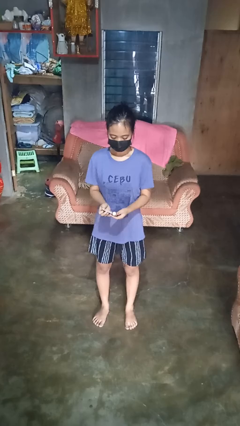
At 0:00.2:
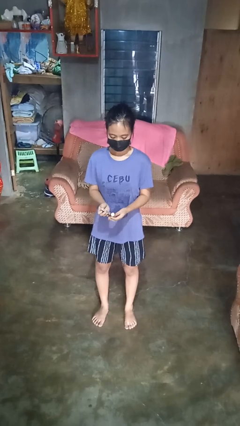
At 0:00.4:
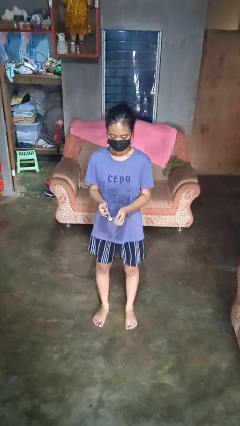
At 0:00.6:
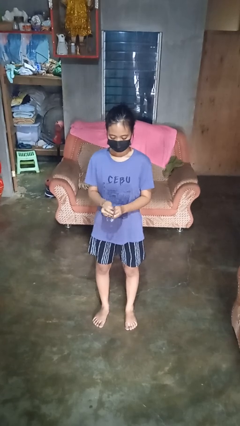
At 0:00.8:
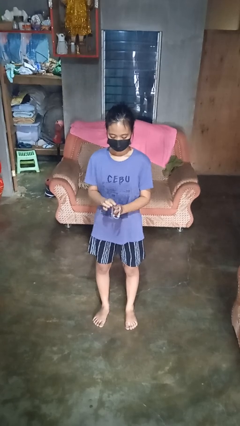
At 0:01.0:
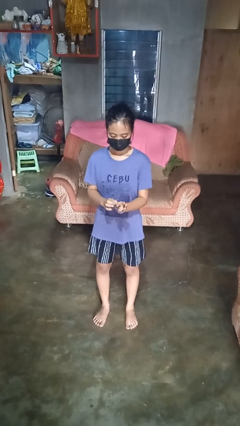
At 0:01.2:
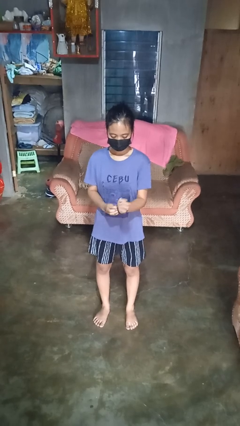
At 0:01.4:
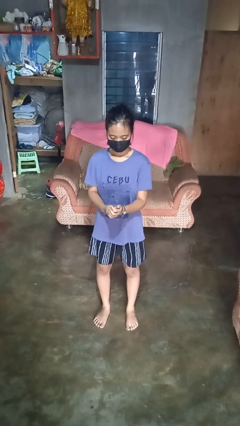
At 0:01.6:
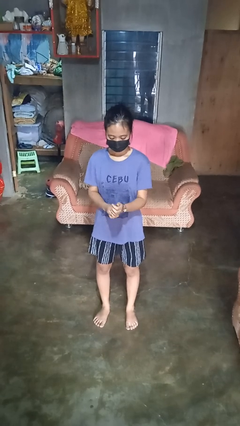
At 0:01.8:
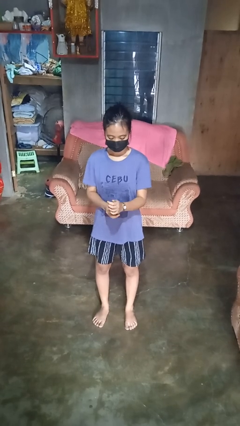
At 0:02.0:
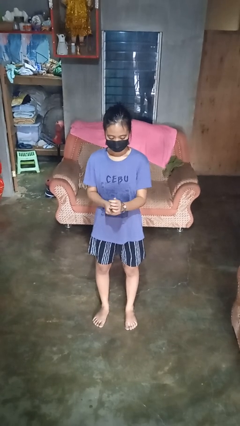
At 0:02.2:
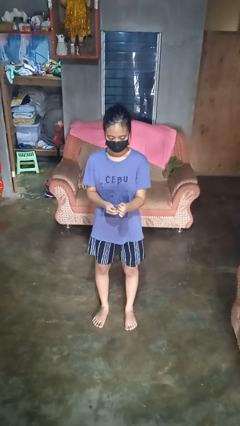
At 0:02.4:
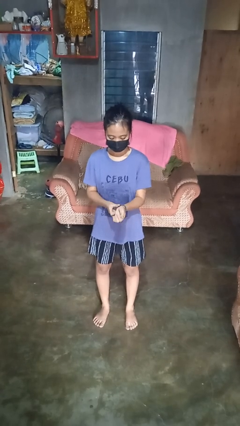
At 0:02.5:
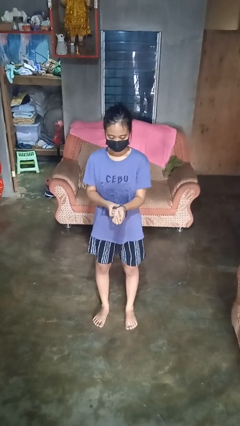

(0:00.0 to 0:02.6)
person puts on wristwatch

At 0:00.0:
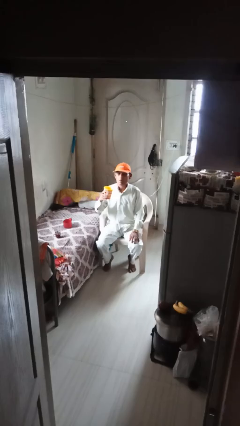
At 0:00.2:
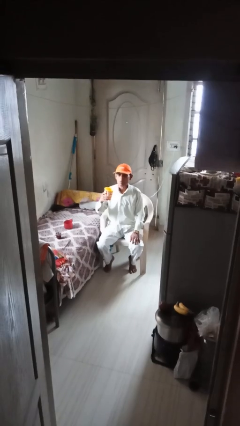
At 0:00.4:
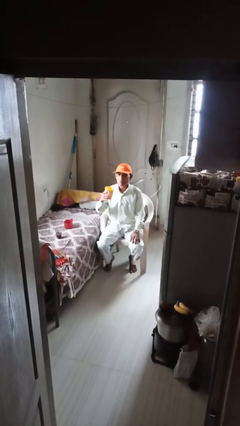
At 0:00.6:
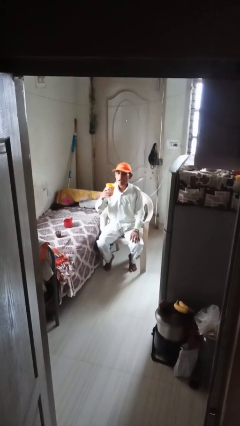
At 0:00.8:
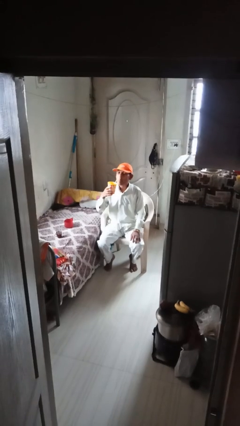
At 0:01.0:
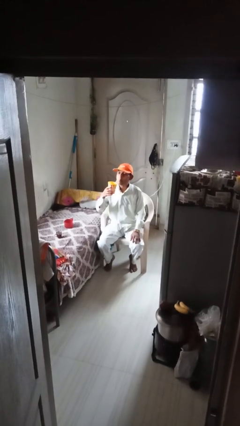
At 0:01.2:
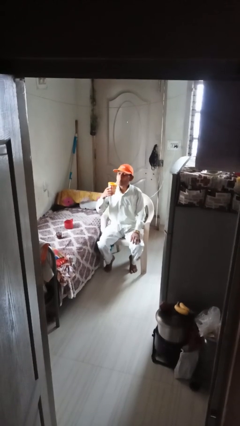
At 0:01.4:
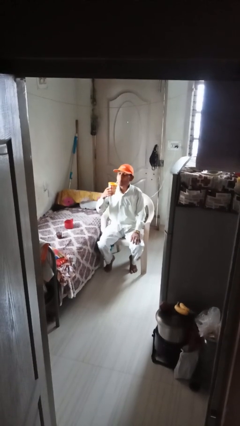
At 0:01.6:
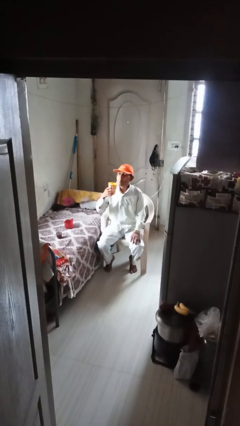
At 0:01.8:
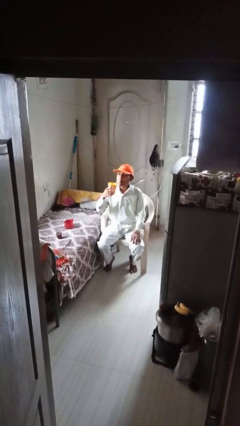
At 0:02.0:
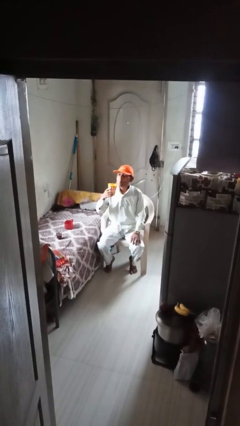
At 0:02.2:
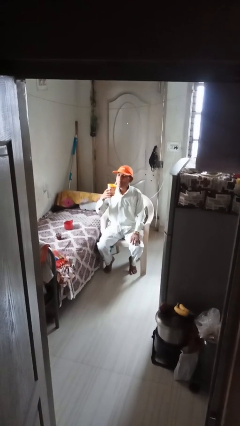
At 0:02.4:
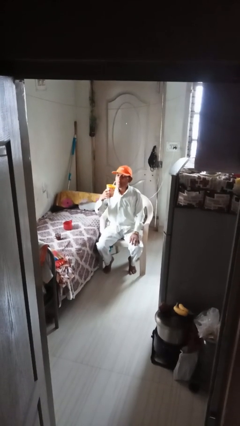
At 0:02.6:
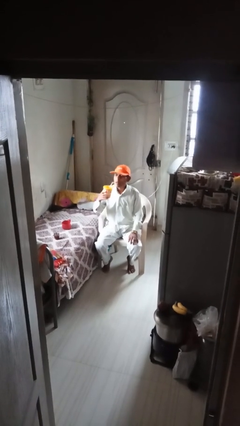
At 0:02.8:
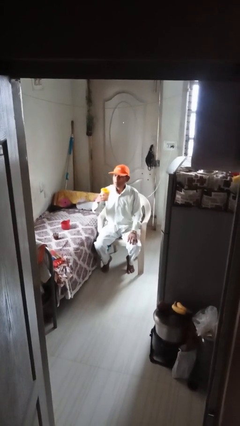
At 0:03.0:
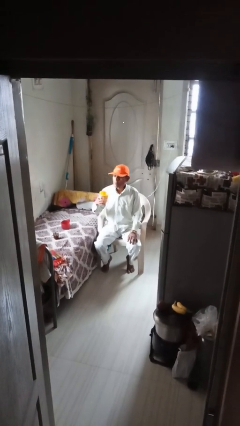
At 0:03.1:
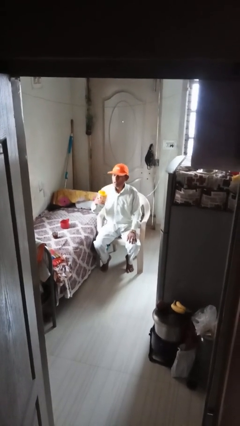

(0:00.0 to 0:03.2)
person drinks from straw

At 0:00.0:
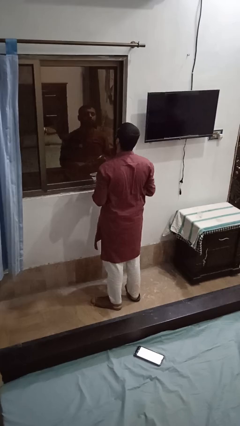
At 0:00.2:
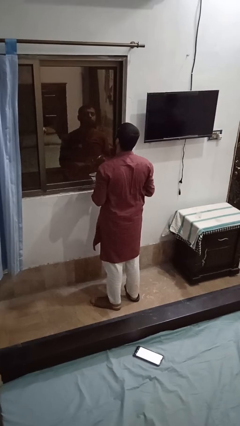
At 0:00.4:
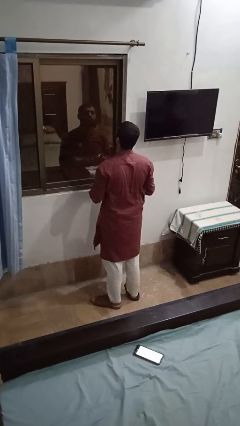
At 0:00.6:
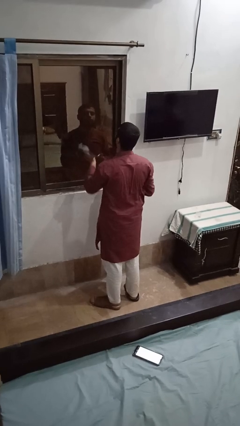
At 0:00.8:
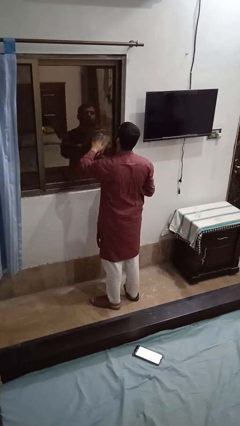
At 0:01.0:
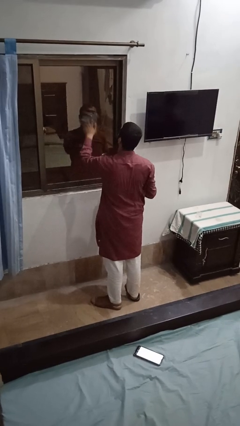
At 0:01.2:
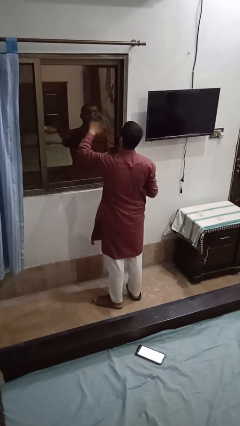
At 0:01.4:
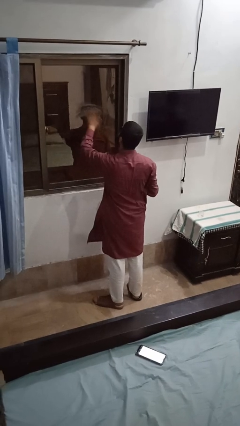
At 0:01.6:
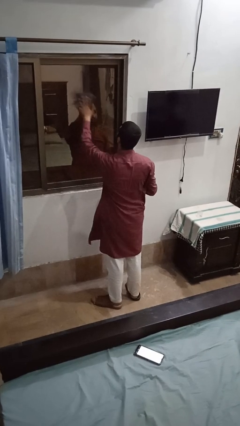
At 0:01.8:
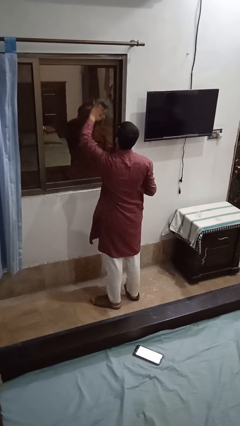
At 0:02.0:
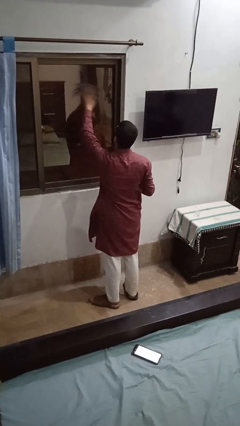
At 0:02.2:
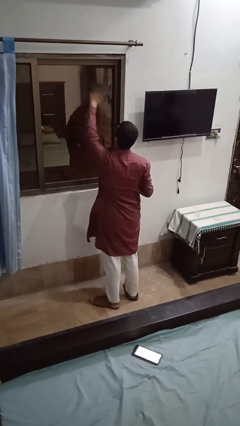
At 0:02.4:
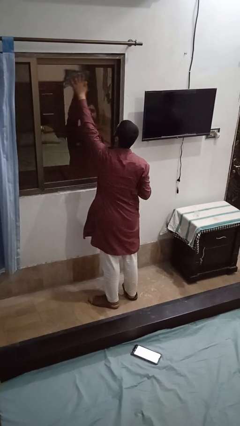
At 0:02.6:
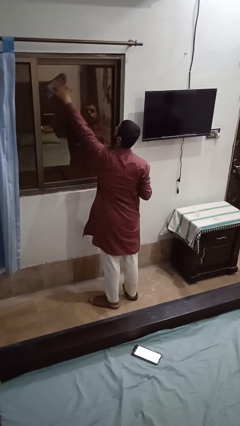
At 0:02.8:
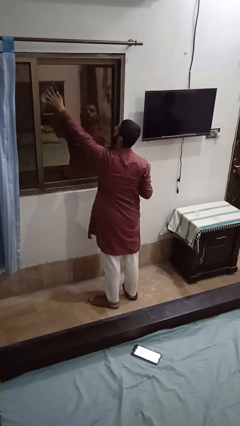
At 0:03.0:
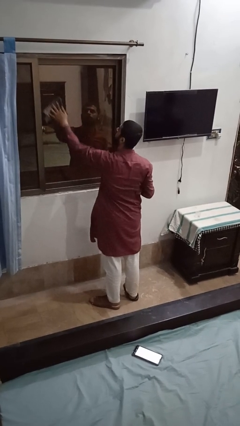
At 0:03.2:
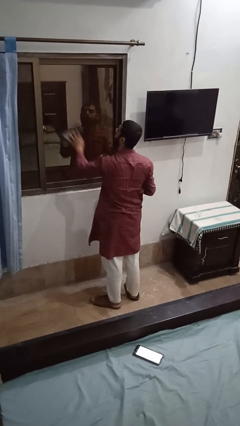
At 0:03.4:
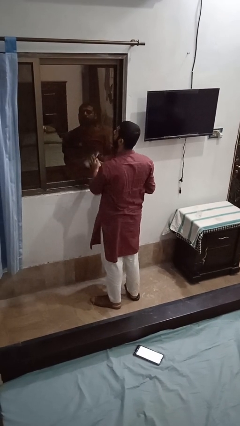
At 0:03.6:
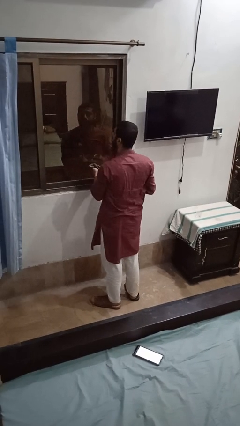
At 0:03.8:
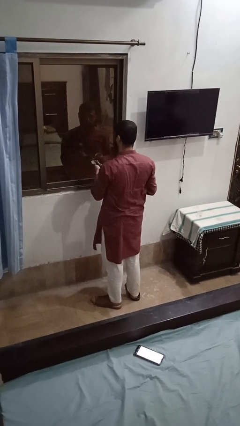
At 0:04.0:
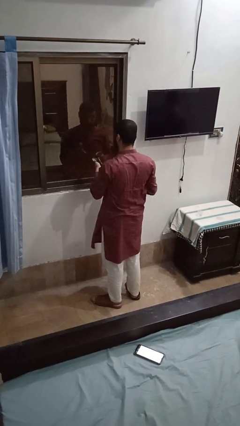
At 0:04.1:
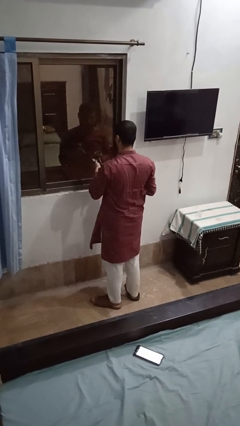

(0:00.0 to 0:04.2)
person washes window

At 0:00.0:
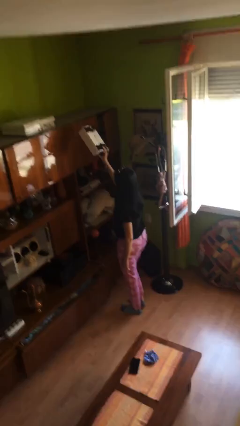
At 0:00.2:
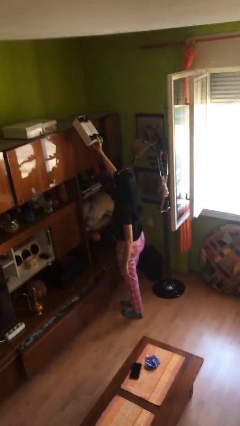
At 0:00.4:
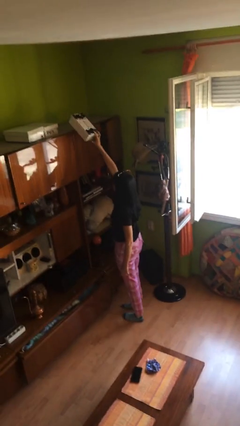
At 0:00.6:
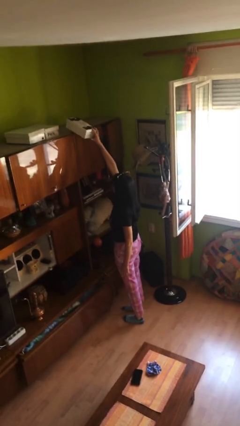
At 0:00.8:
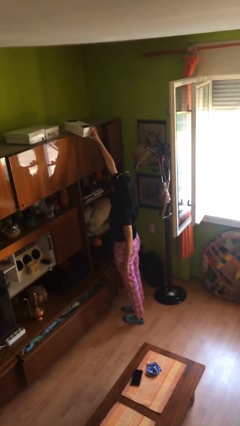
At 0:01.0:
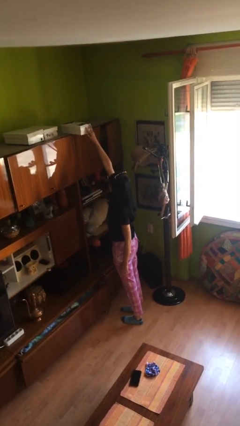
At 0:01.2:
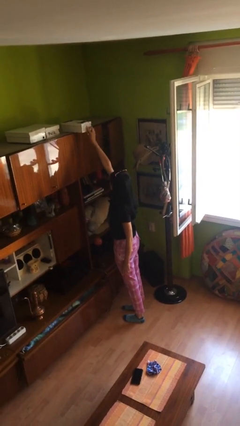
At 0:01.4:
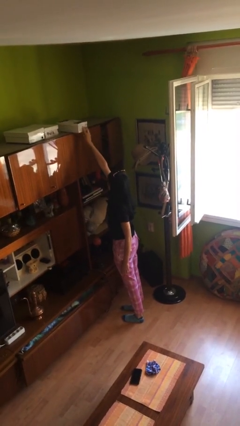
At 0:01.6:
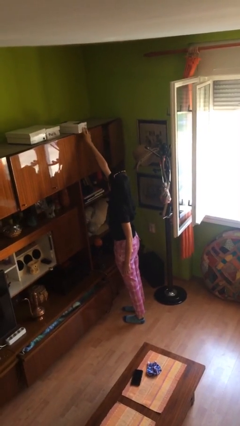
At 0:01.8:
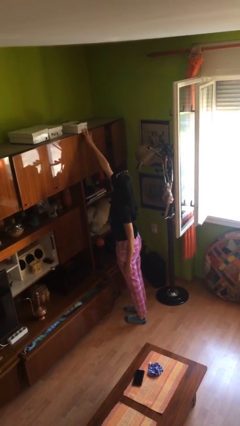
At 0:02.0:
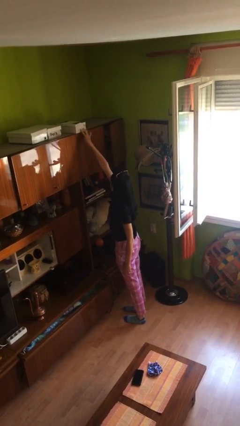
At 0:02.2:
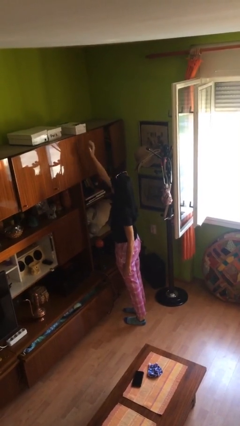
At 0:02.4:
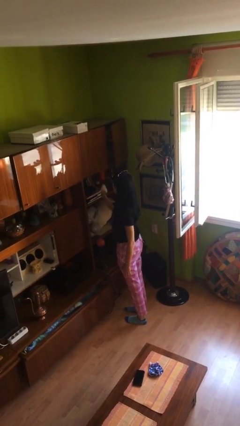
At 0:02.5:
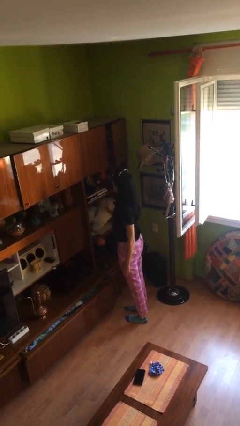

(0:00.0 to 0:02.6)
person puts down object on shelf

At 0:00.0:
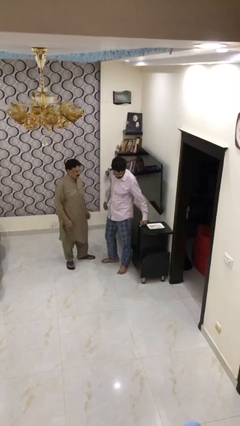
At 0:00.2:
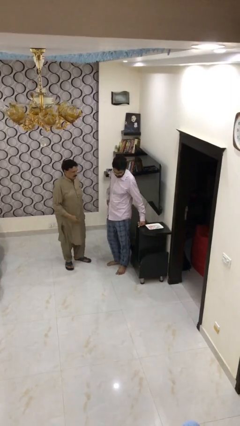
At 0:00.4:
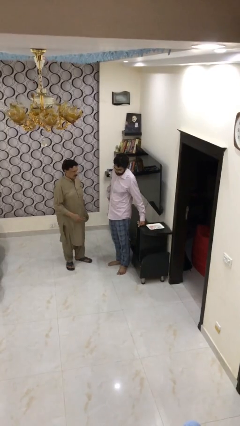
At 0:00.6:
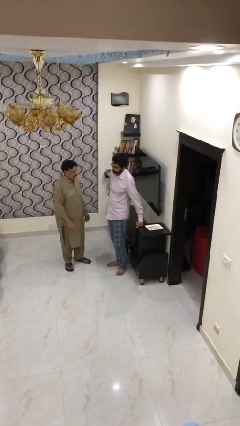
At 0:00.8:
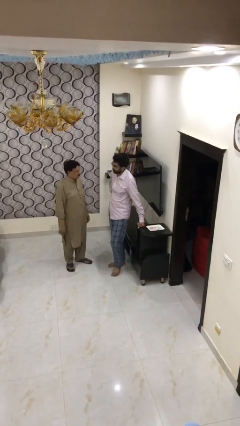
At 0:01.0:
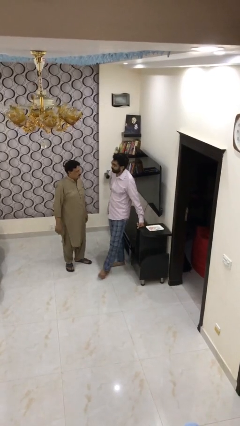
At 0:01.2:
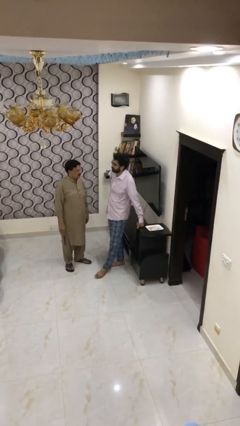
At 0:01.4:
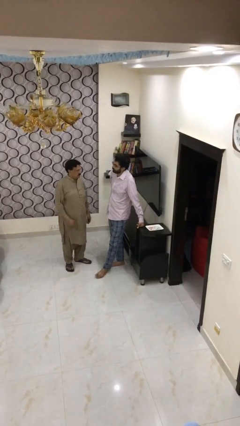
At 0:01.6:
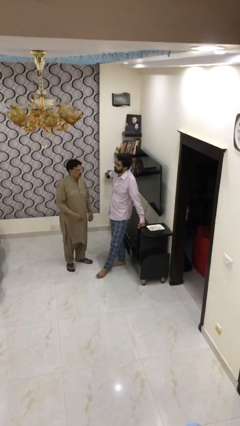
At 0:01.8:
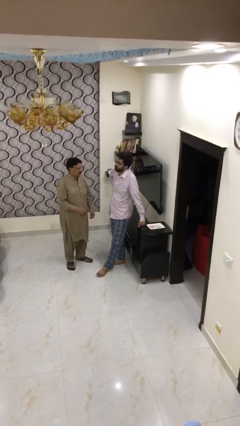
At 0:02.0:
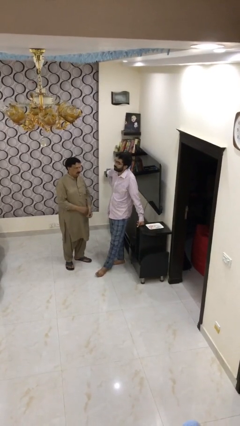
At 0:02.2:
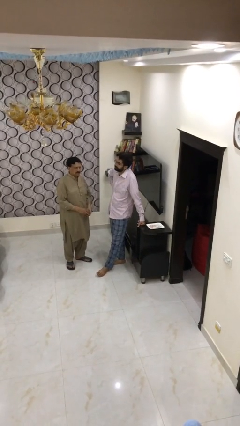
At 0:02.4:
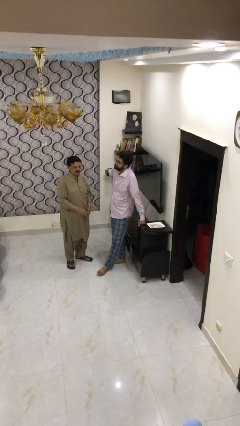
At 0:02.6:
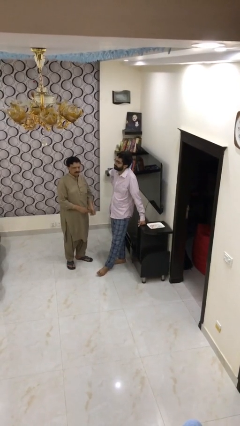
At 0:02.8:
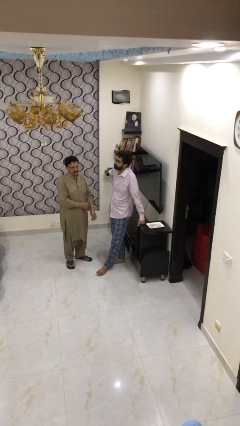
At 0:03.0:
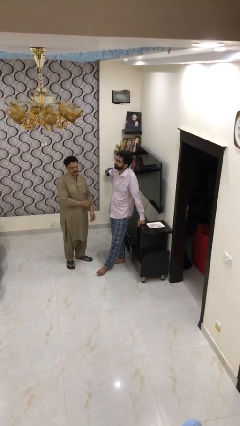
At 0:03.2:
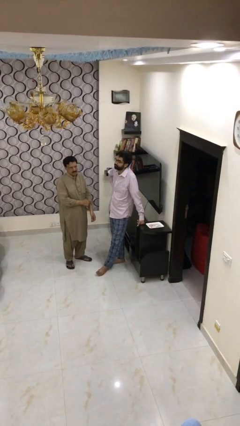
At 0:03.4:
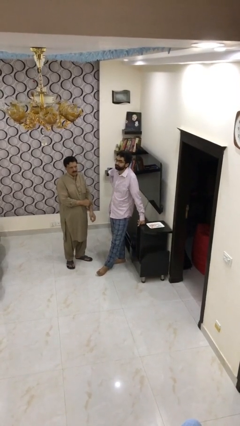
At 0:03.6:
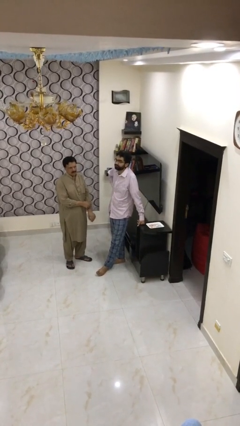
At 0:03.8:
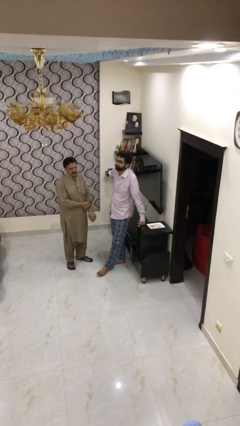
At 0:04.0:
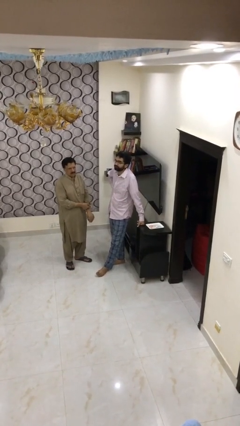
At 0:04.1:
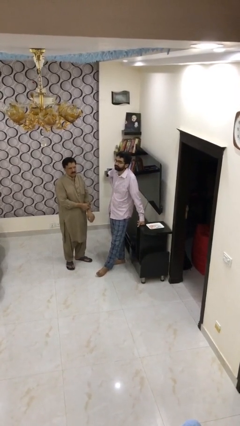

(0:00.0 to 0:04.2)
person talks to person

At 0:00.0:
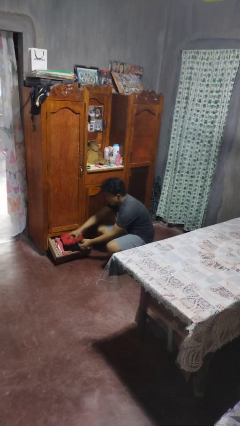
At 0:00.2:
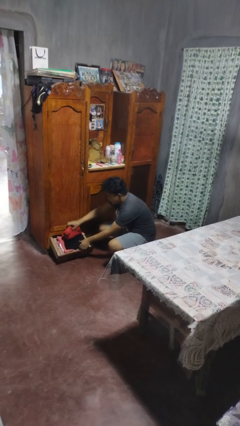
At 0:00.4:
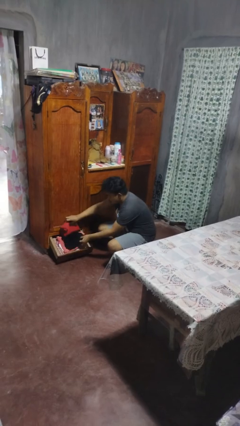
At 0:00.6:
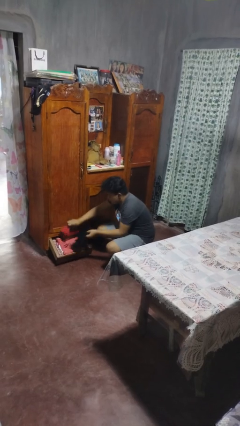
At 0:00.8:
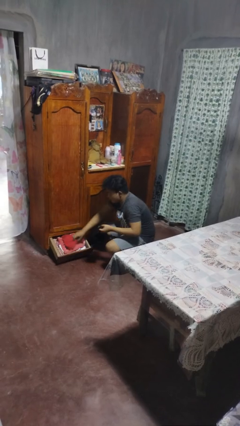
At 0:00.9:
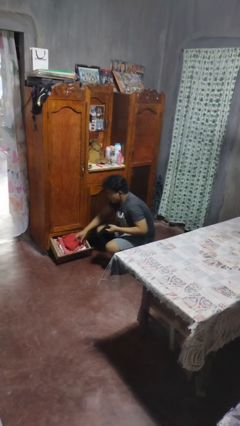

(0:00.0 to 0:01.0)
person takes clothes from dresser
